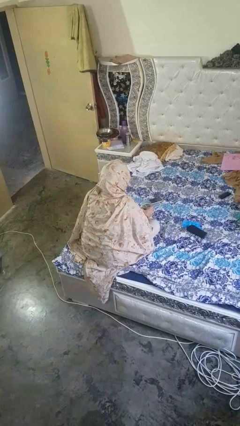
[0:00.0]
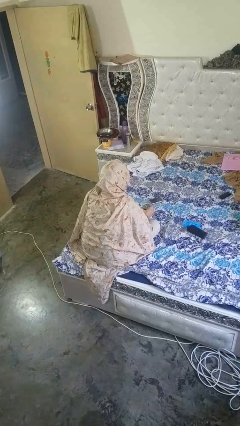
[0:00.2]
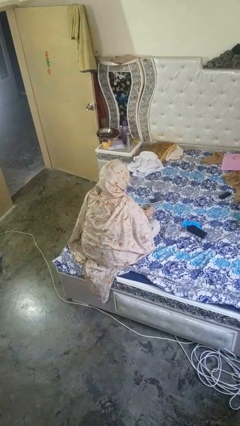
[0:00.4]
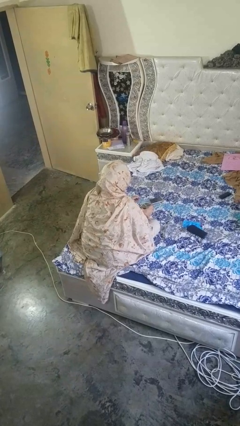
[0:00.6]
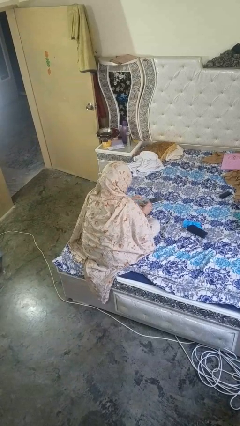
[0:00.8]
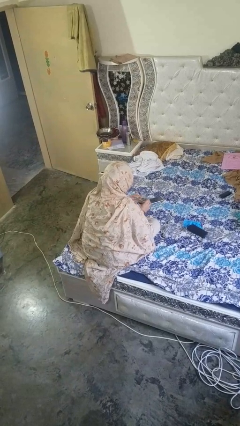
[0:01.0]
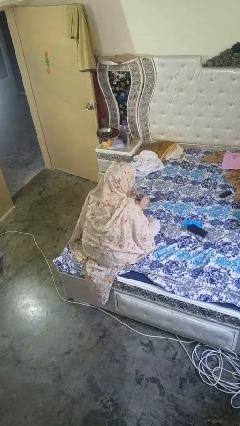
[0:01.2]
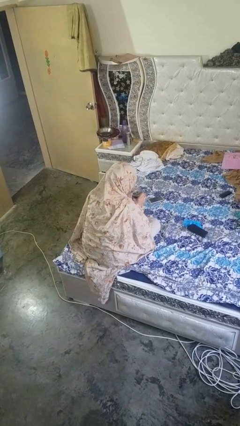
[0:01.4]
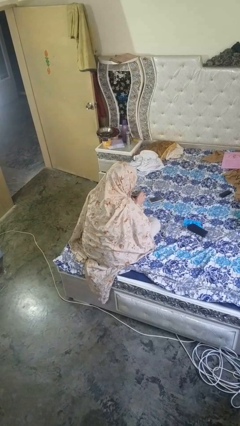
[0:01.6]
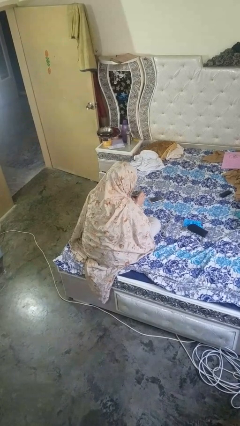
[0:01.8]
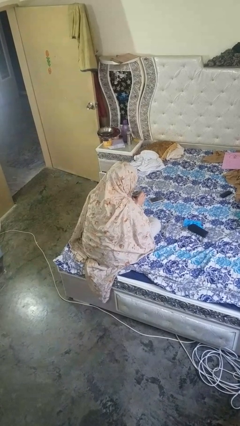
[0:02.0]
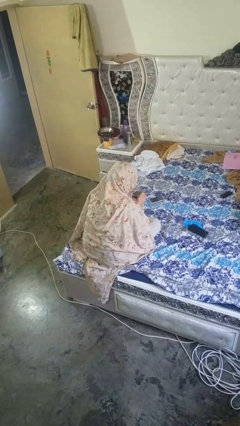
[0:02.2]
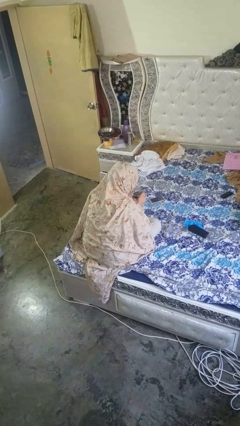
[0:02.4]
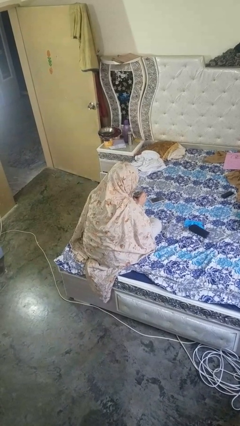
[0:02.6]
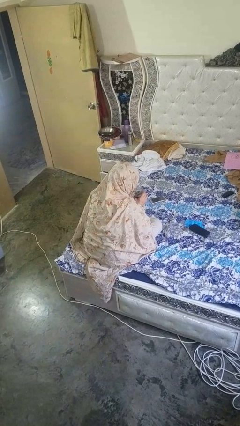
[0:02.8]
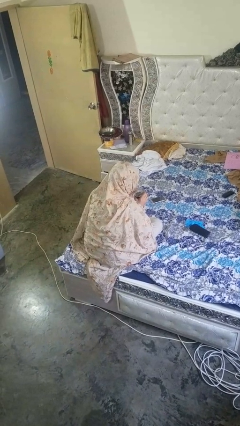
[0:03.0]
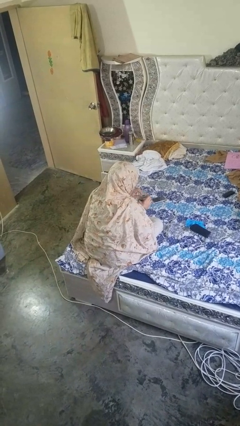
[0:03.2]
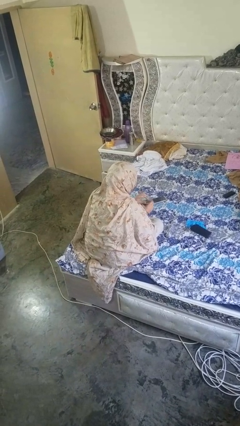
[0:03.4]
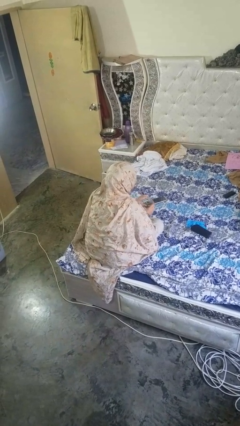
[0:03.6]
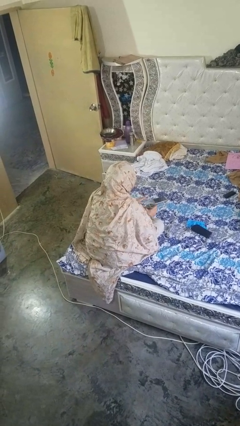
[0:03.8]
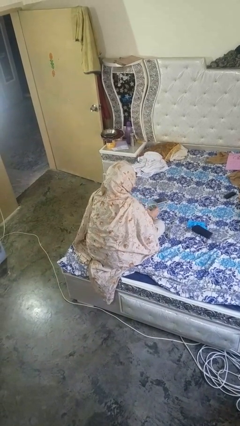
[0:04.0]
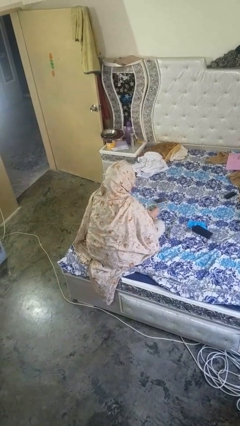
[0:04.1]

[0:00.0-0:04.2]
person drinks from straw

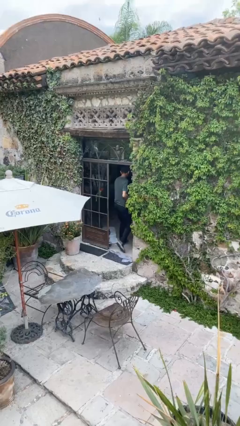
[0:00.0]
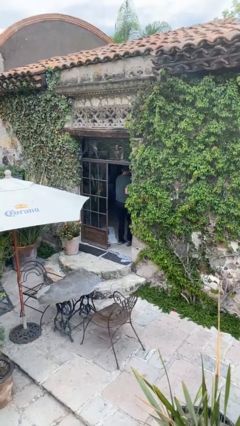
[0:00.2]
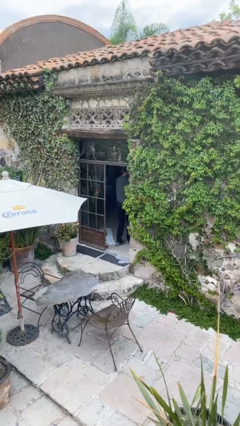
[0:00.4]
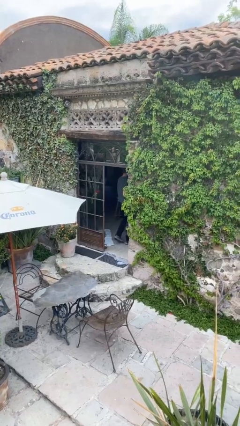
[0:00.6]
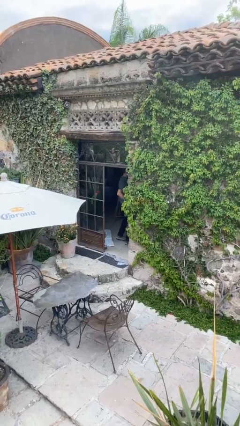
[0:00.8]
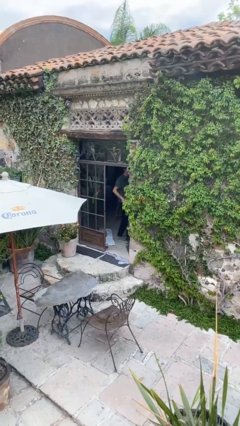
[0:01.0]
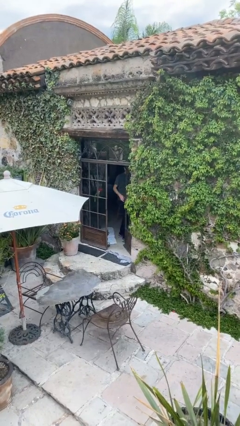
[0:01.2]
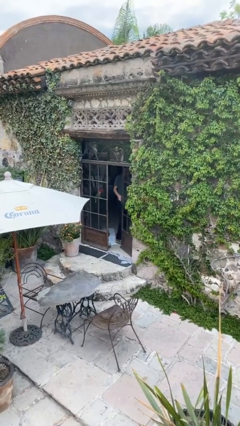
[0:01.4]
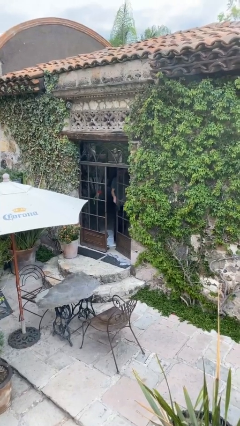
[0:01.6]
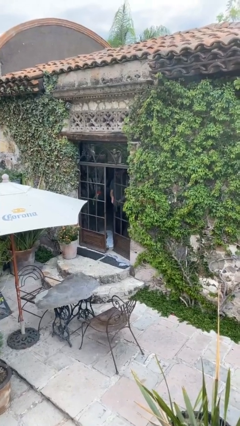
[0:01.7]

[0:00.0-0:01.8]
person exits scene through structure

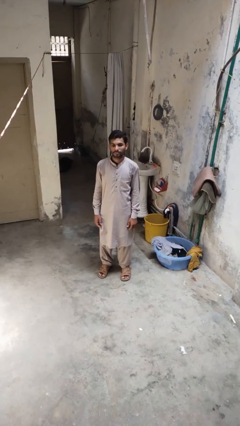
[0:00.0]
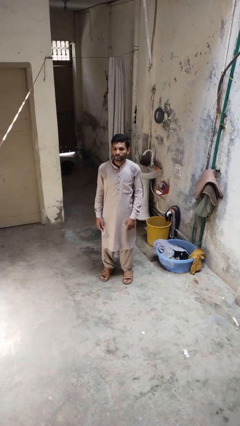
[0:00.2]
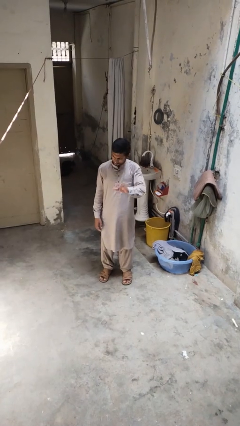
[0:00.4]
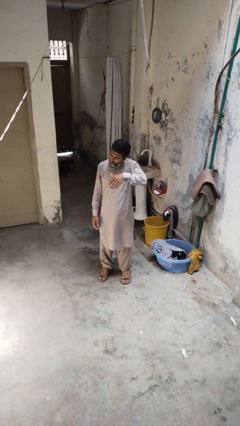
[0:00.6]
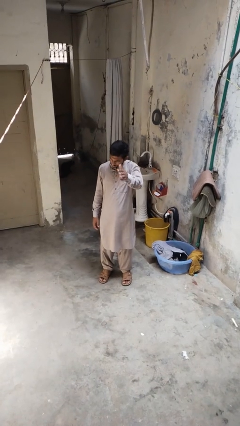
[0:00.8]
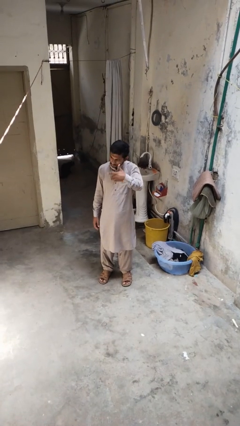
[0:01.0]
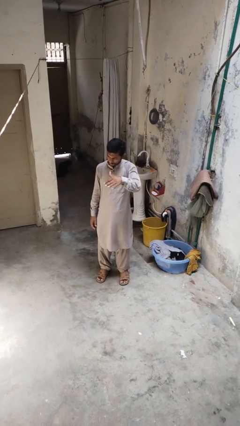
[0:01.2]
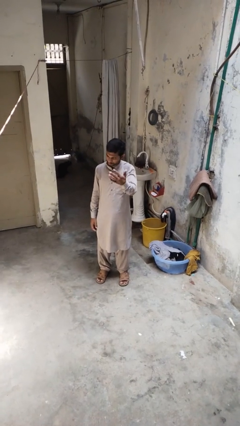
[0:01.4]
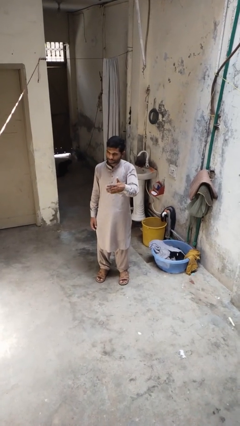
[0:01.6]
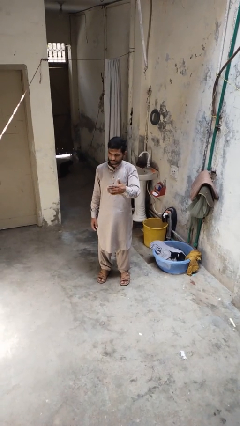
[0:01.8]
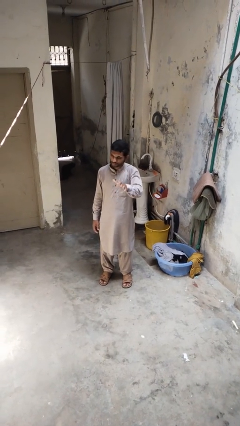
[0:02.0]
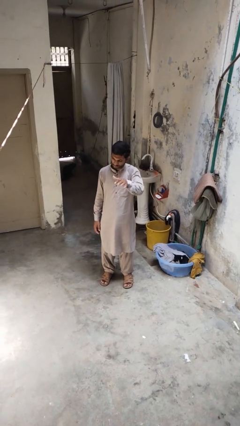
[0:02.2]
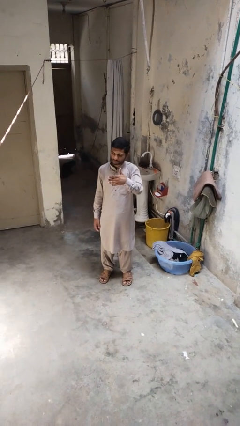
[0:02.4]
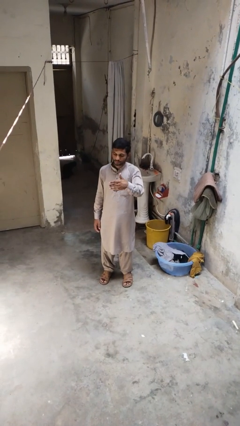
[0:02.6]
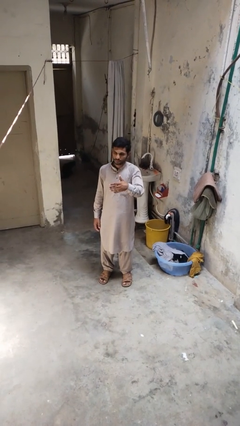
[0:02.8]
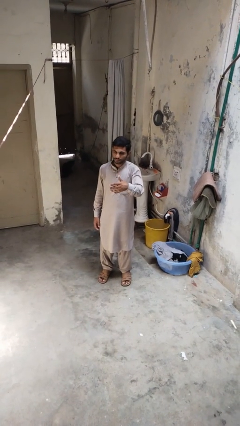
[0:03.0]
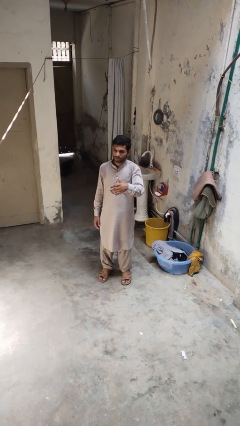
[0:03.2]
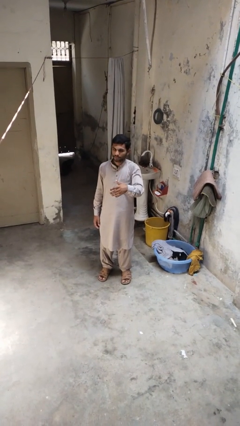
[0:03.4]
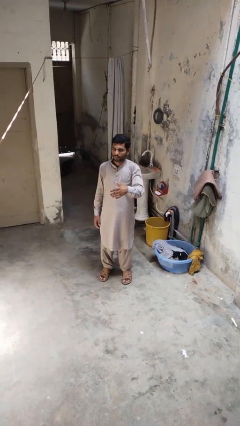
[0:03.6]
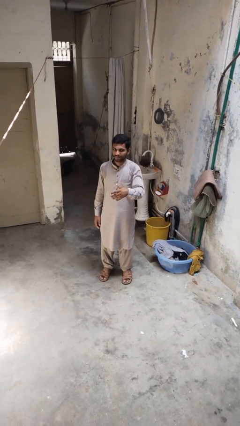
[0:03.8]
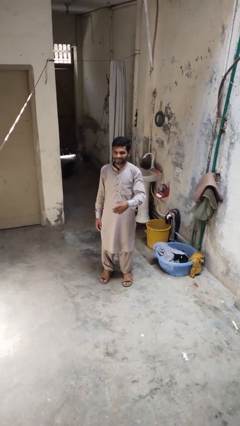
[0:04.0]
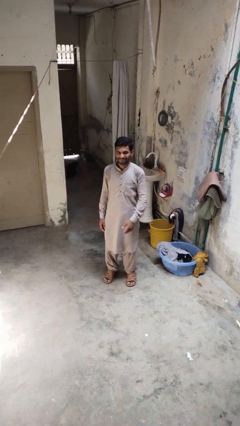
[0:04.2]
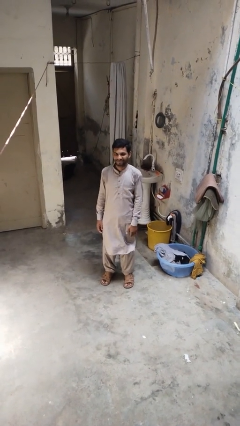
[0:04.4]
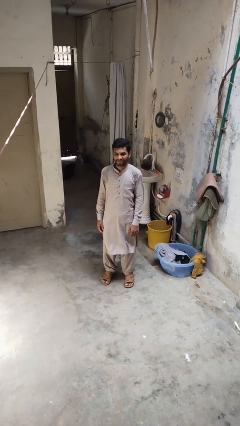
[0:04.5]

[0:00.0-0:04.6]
person gestures come here

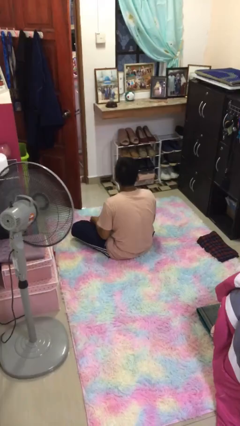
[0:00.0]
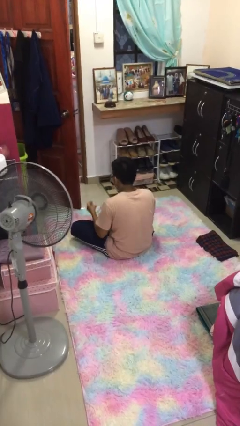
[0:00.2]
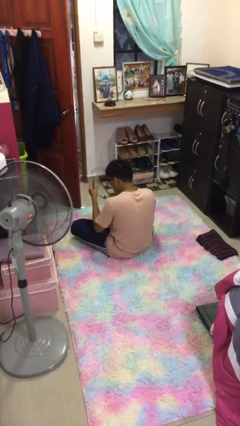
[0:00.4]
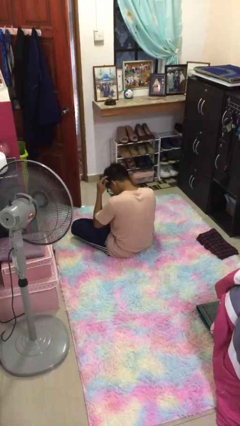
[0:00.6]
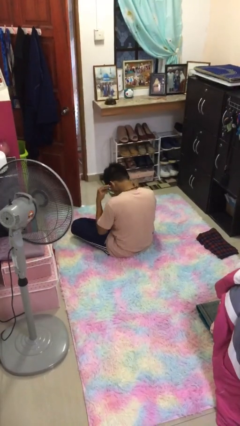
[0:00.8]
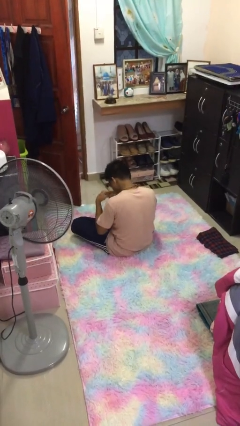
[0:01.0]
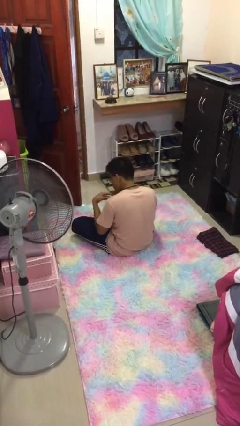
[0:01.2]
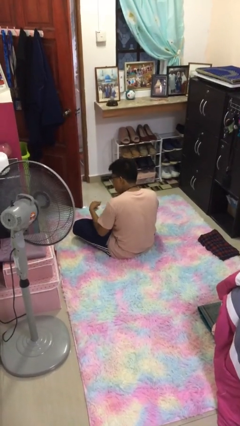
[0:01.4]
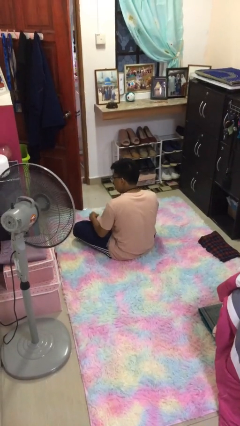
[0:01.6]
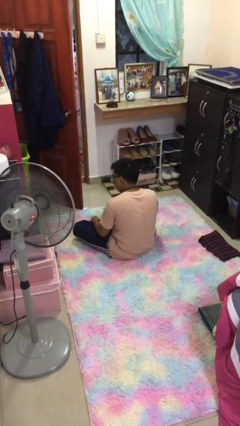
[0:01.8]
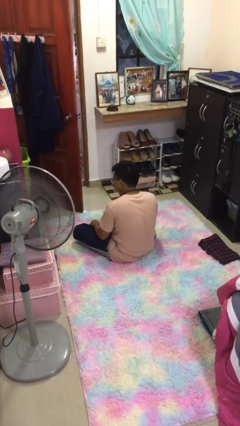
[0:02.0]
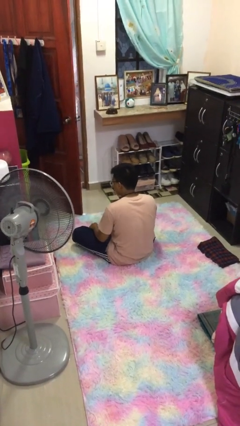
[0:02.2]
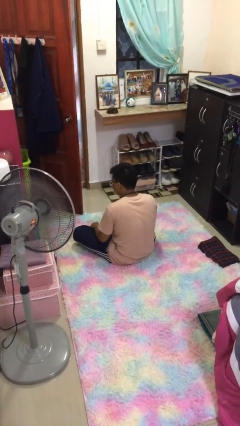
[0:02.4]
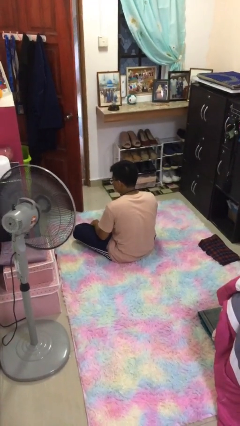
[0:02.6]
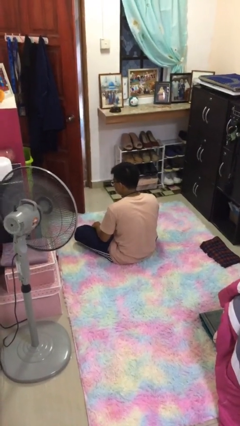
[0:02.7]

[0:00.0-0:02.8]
person puts on necklace

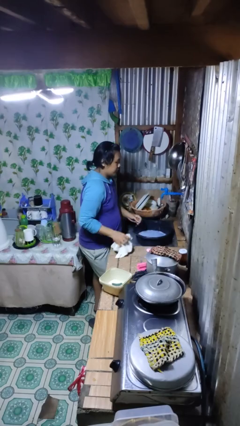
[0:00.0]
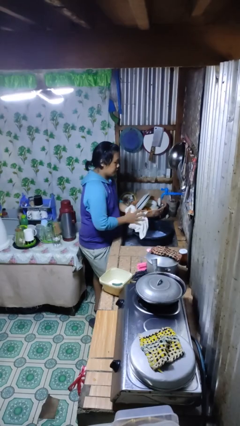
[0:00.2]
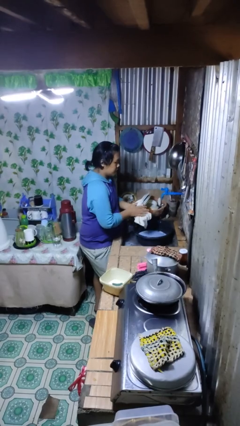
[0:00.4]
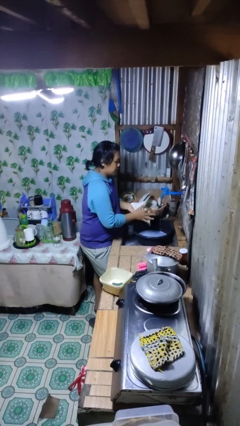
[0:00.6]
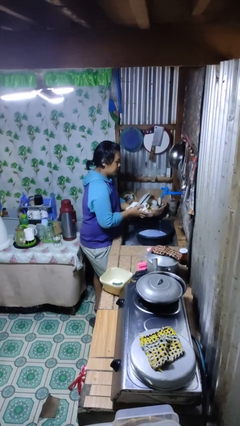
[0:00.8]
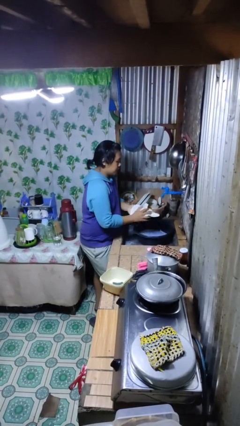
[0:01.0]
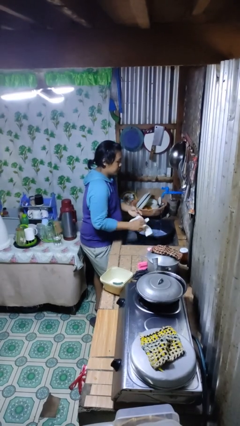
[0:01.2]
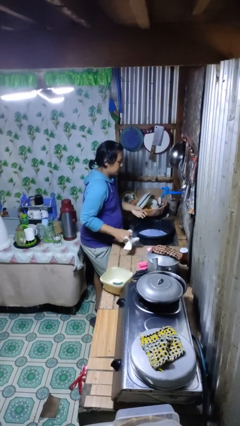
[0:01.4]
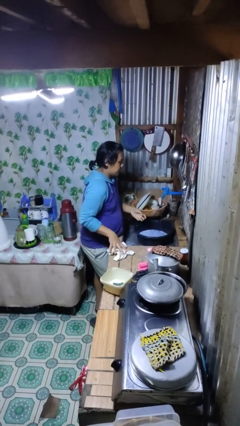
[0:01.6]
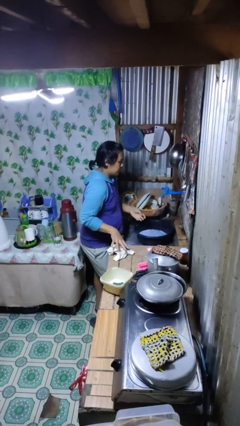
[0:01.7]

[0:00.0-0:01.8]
person dries hands with towel

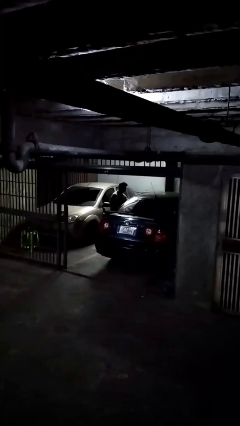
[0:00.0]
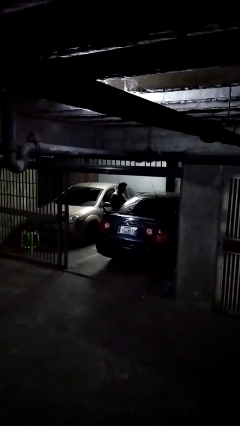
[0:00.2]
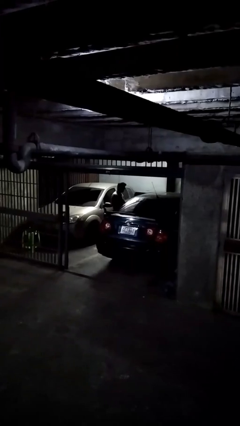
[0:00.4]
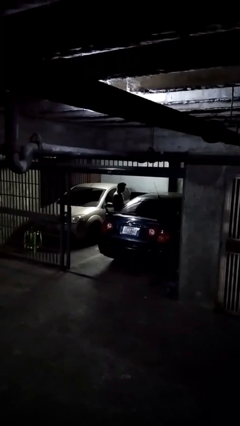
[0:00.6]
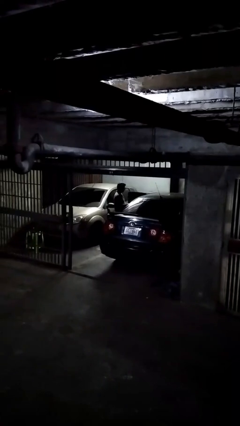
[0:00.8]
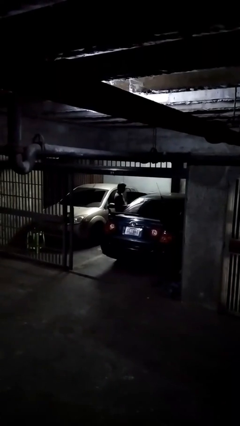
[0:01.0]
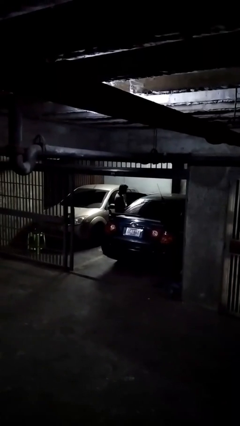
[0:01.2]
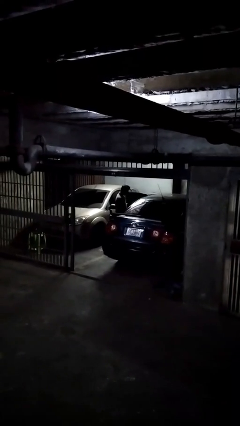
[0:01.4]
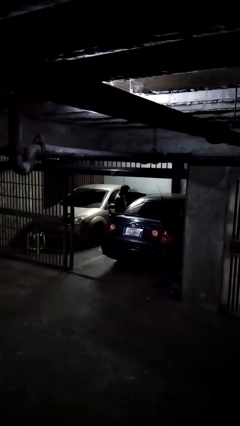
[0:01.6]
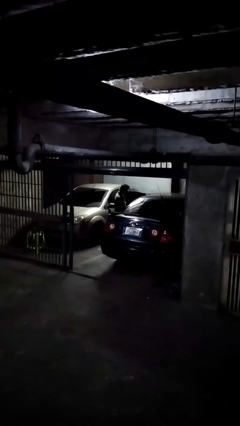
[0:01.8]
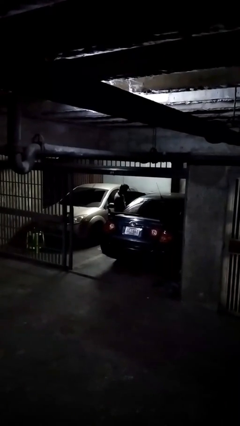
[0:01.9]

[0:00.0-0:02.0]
person opens car door
